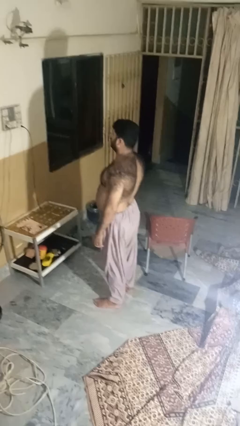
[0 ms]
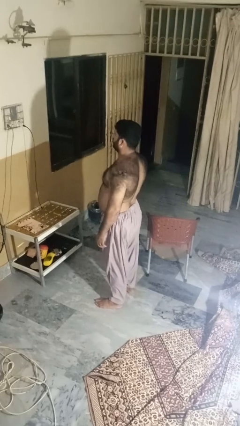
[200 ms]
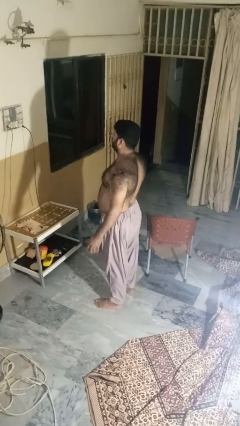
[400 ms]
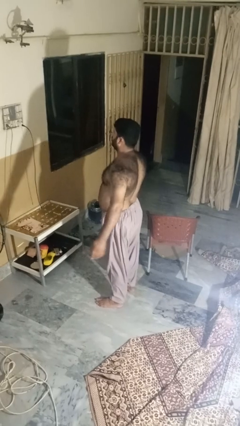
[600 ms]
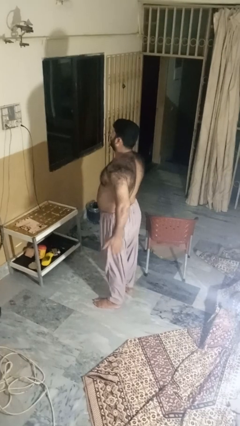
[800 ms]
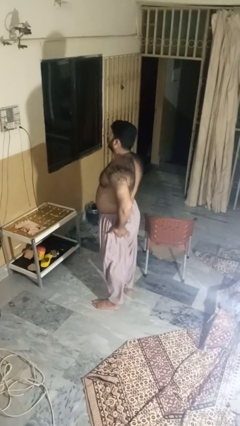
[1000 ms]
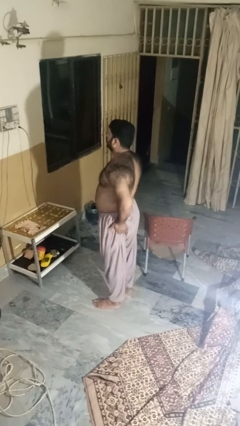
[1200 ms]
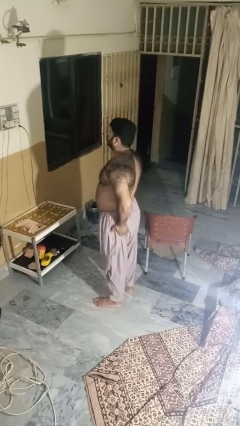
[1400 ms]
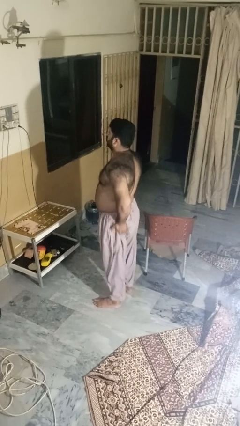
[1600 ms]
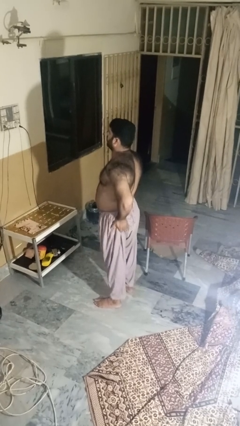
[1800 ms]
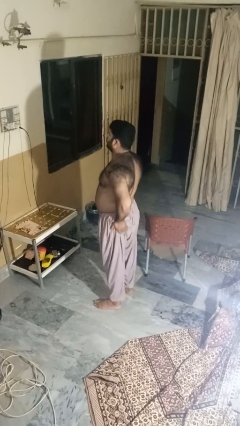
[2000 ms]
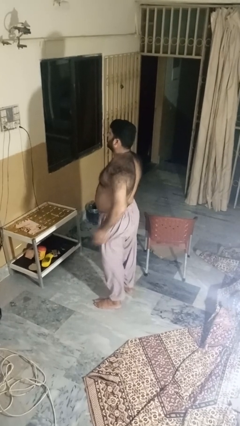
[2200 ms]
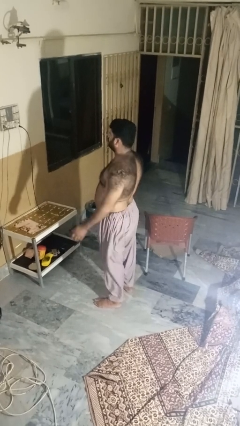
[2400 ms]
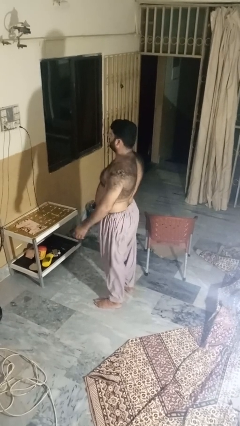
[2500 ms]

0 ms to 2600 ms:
person wiggles hips

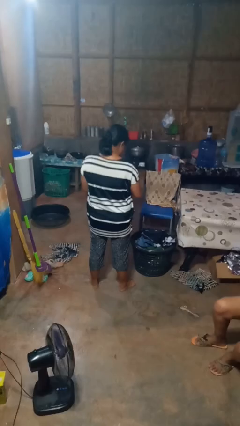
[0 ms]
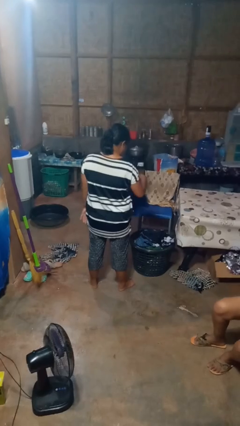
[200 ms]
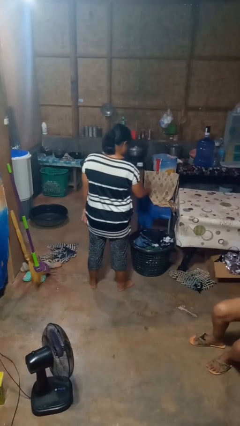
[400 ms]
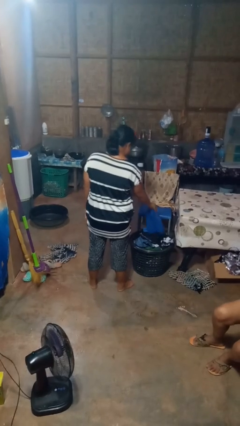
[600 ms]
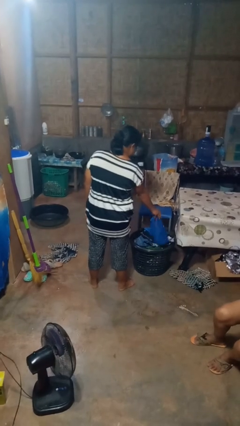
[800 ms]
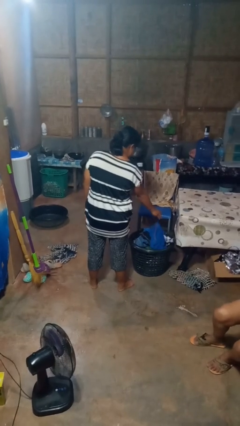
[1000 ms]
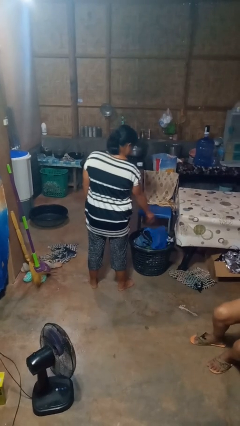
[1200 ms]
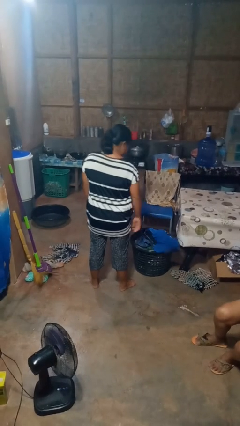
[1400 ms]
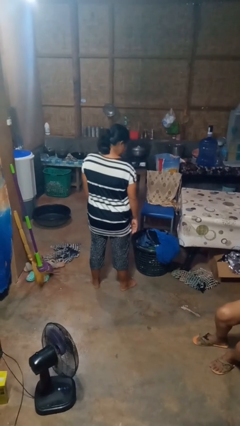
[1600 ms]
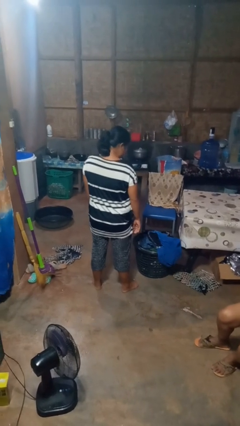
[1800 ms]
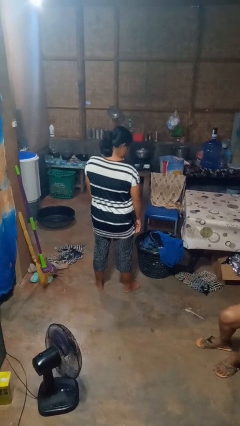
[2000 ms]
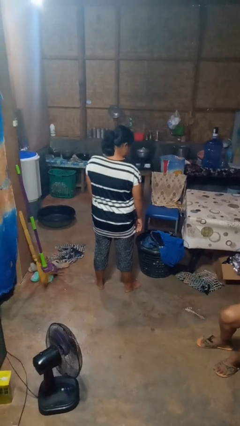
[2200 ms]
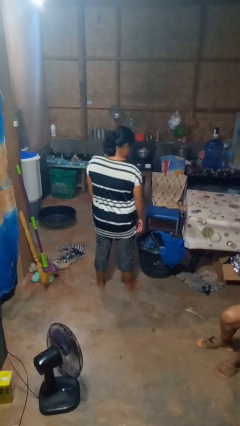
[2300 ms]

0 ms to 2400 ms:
person puts object into basket

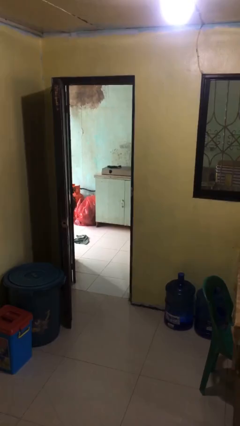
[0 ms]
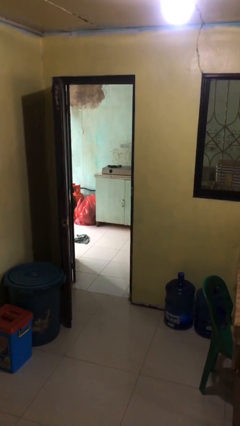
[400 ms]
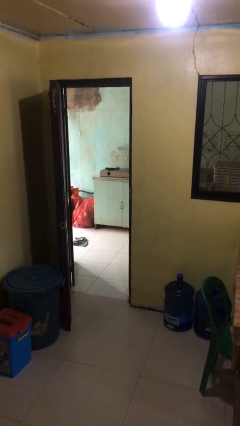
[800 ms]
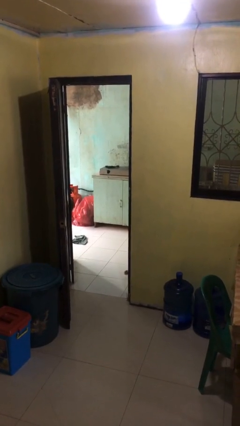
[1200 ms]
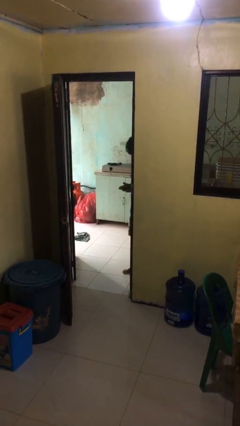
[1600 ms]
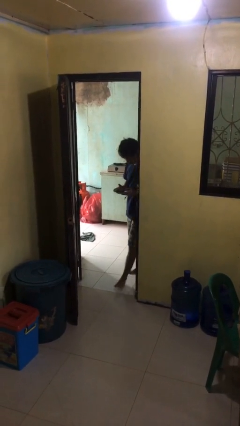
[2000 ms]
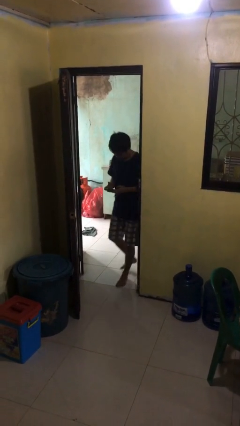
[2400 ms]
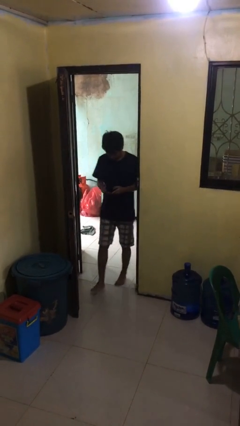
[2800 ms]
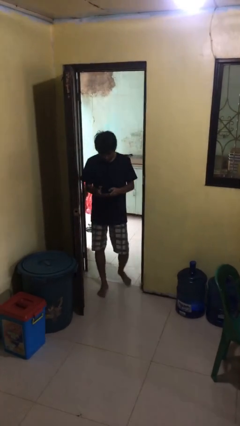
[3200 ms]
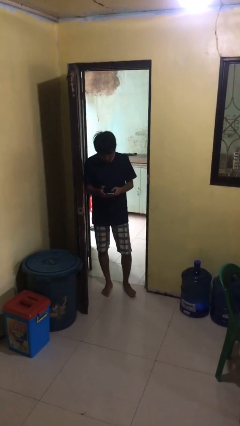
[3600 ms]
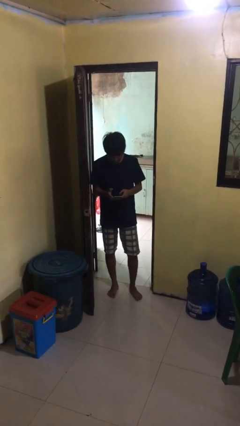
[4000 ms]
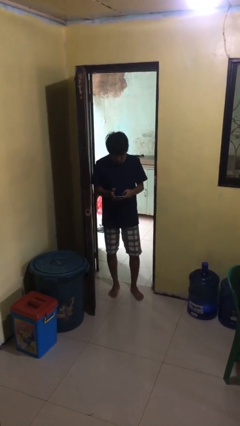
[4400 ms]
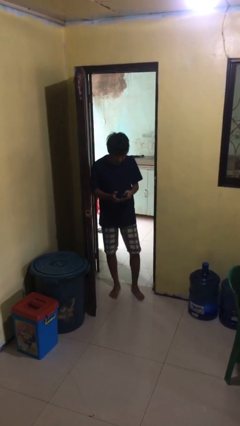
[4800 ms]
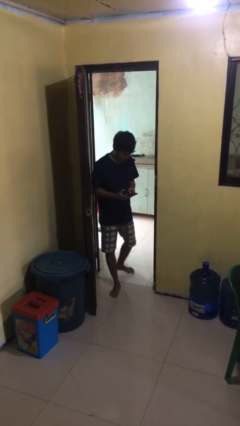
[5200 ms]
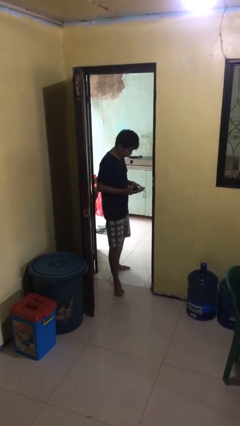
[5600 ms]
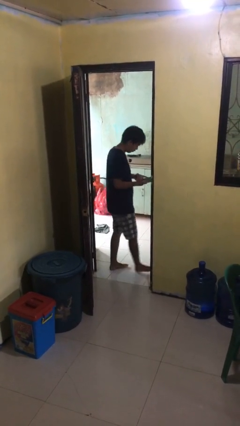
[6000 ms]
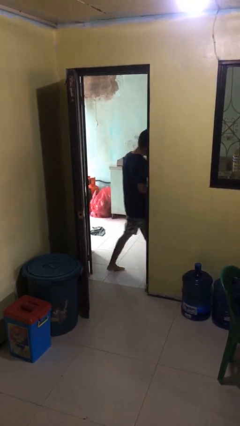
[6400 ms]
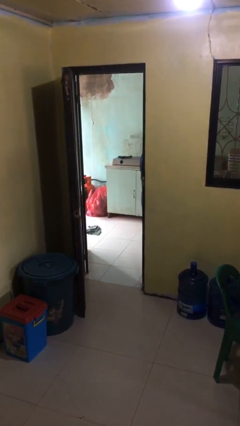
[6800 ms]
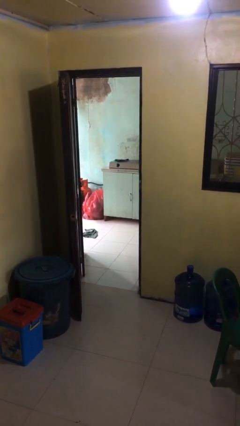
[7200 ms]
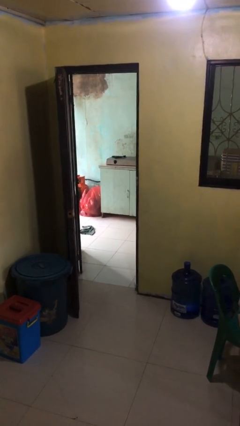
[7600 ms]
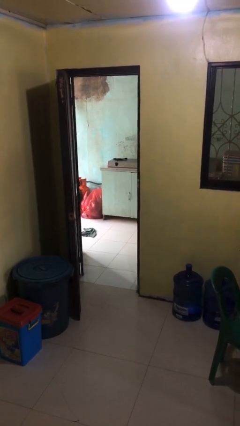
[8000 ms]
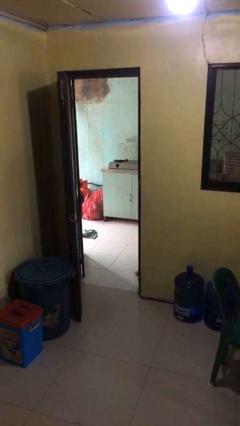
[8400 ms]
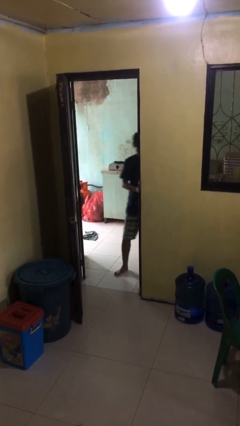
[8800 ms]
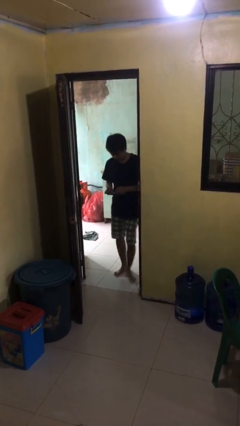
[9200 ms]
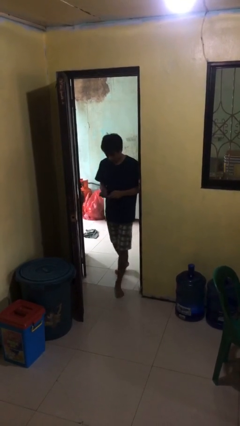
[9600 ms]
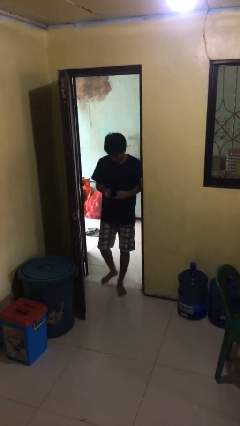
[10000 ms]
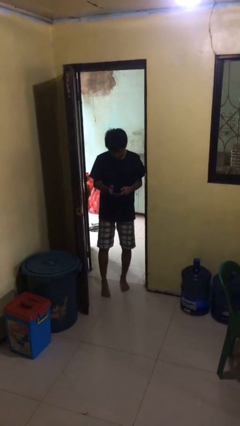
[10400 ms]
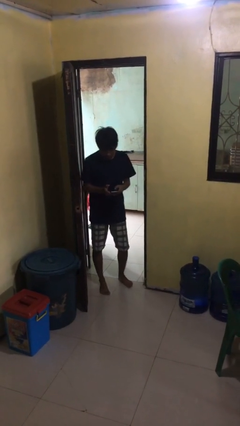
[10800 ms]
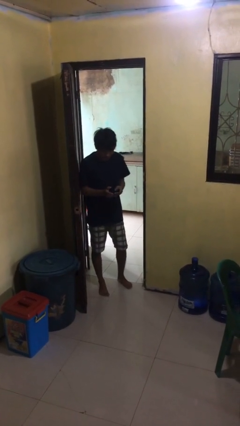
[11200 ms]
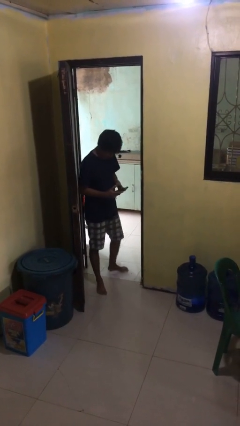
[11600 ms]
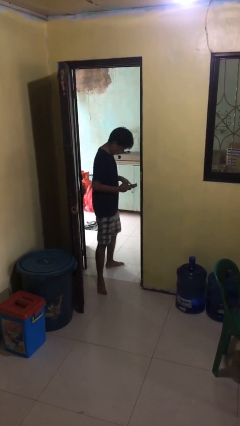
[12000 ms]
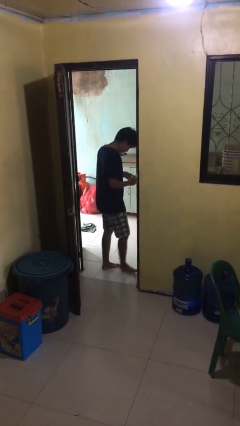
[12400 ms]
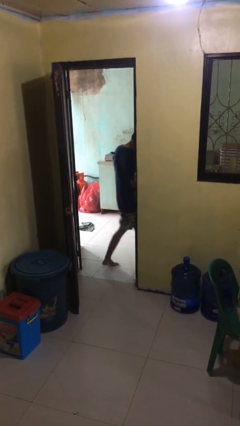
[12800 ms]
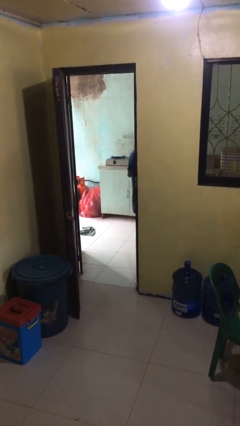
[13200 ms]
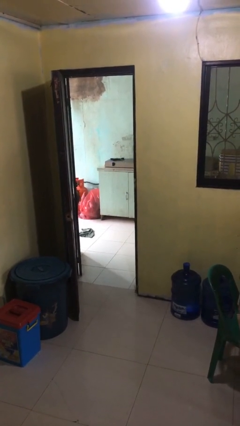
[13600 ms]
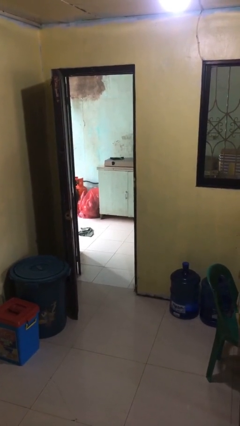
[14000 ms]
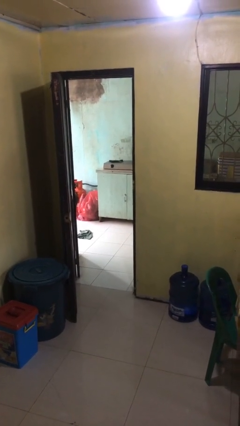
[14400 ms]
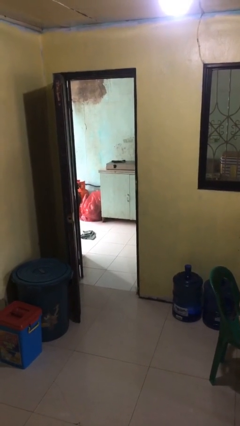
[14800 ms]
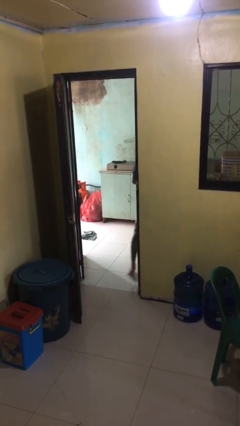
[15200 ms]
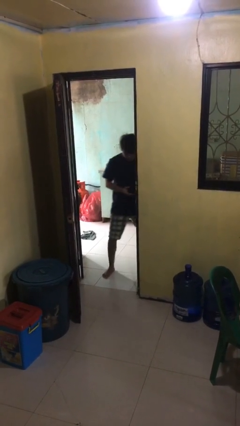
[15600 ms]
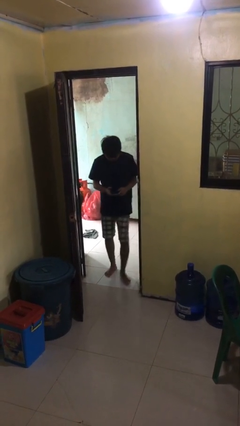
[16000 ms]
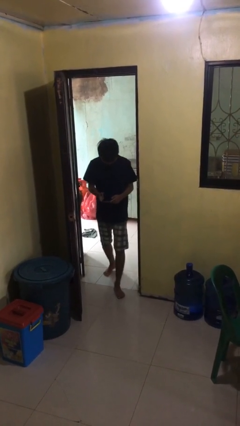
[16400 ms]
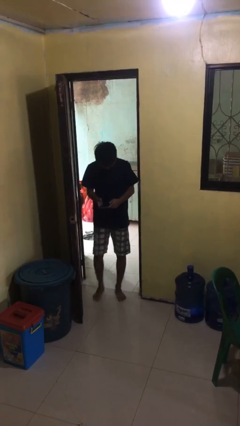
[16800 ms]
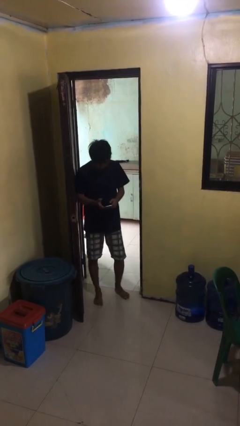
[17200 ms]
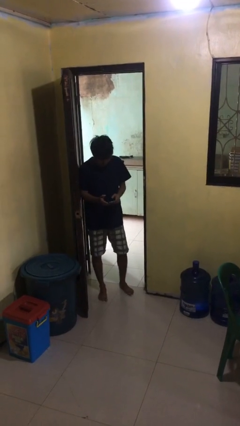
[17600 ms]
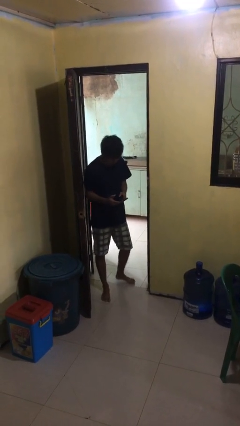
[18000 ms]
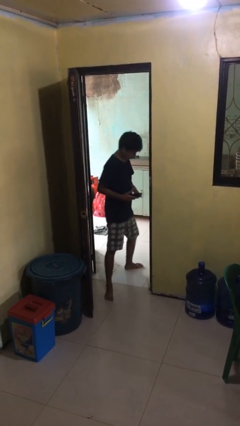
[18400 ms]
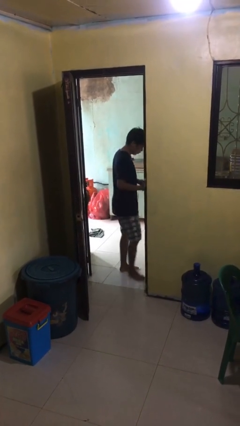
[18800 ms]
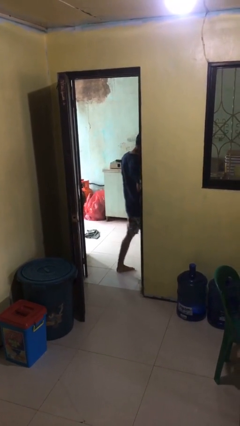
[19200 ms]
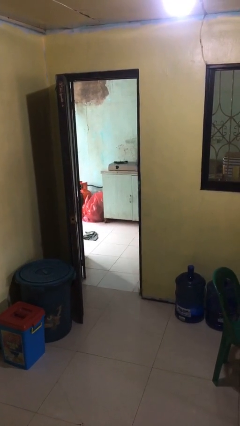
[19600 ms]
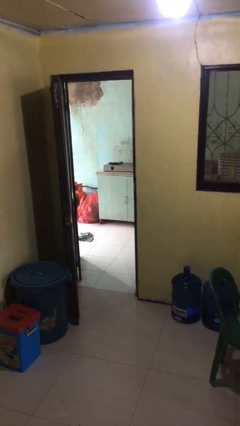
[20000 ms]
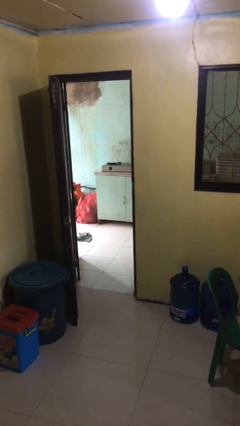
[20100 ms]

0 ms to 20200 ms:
person texts on phone

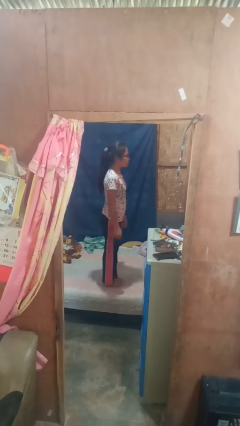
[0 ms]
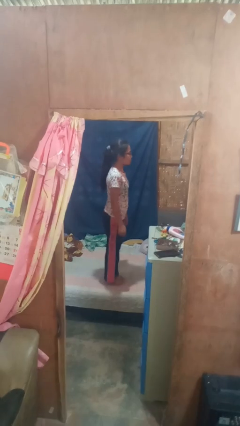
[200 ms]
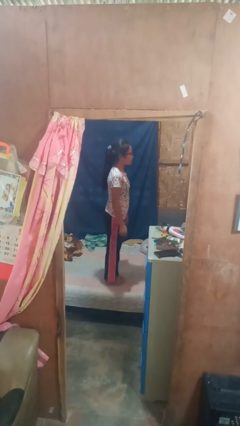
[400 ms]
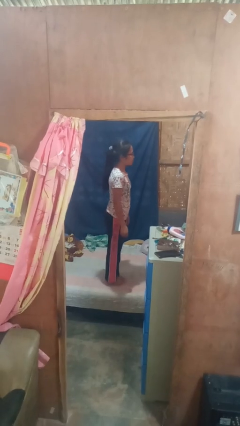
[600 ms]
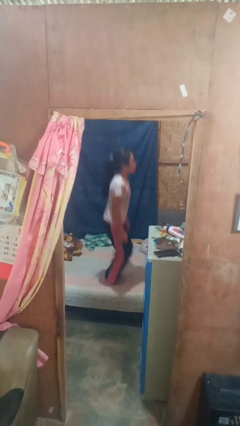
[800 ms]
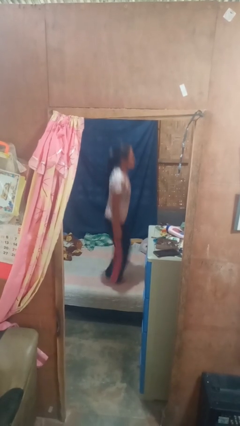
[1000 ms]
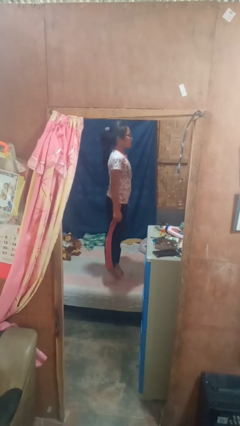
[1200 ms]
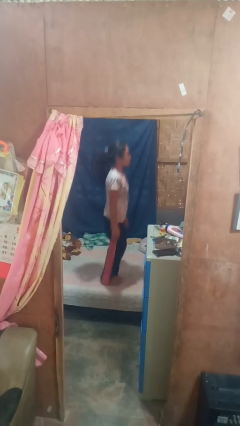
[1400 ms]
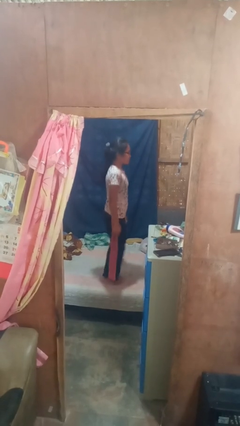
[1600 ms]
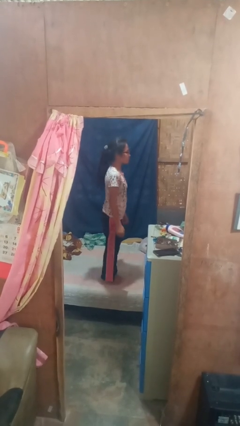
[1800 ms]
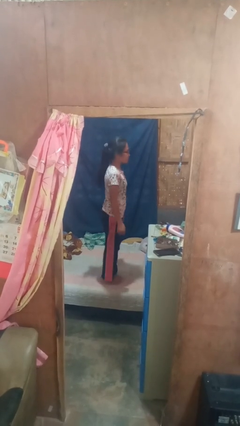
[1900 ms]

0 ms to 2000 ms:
person jumps on bed

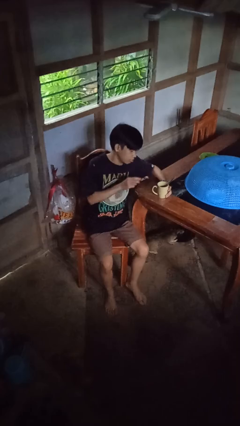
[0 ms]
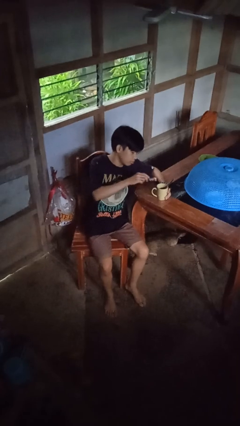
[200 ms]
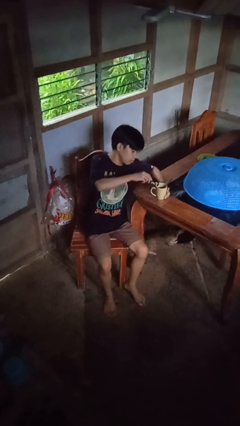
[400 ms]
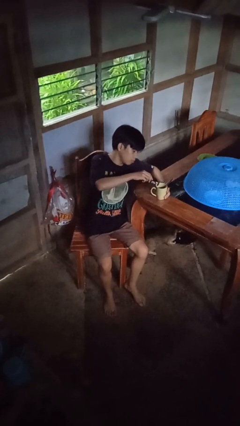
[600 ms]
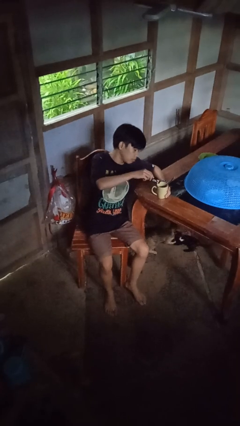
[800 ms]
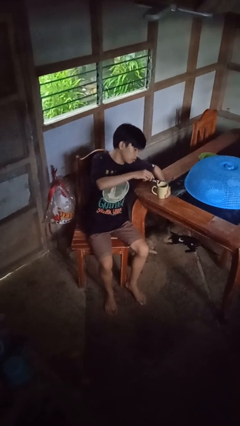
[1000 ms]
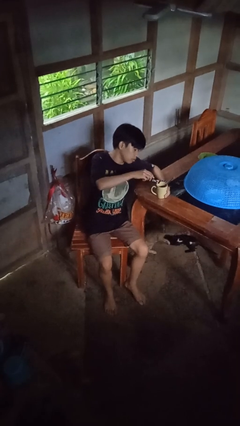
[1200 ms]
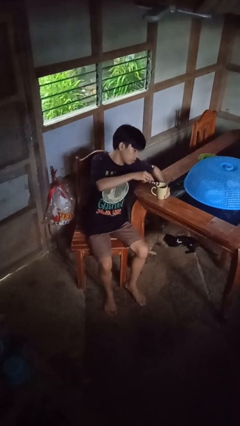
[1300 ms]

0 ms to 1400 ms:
person pours coffee into mug
